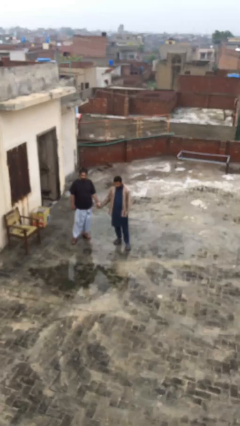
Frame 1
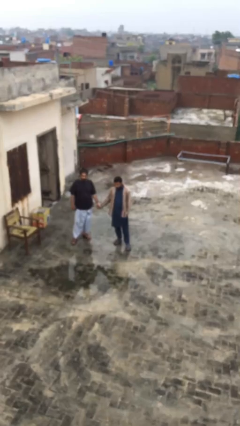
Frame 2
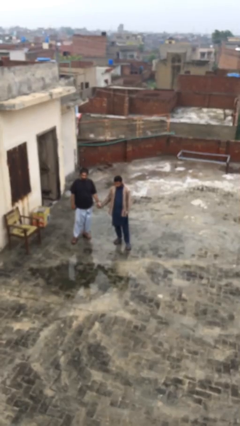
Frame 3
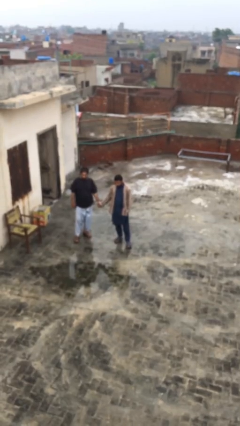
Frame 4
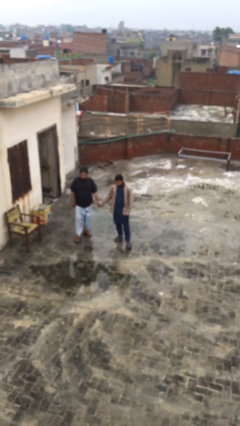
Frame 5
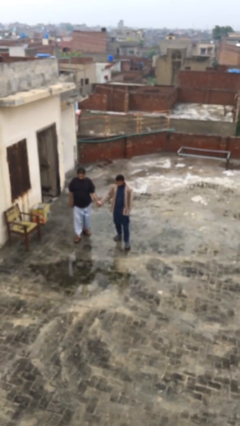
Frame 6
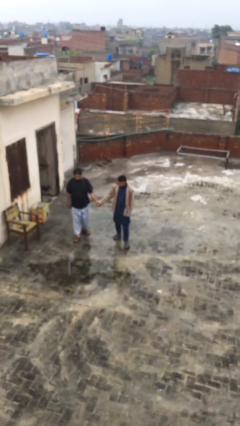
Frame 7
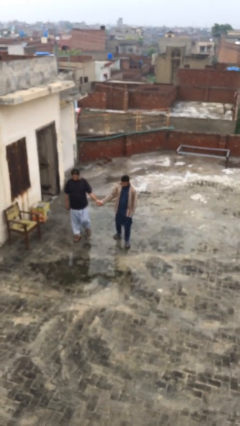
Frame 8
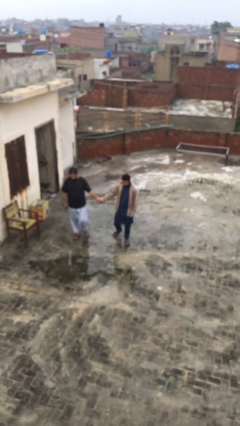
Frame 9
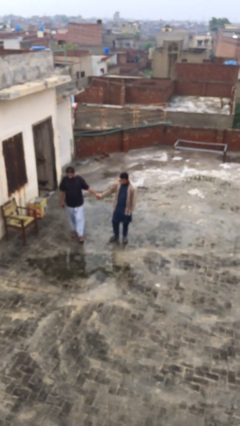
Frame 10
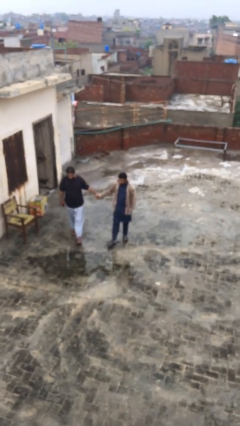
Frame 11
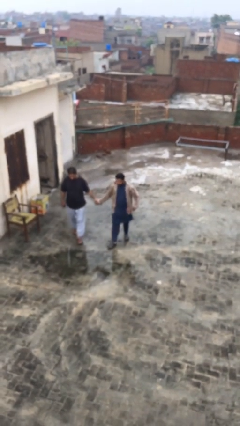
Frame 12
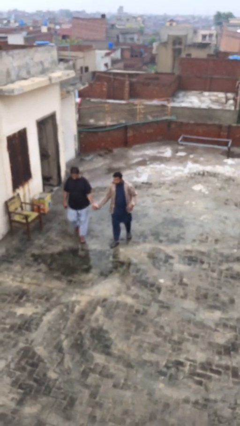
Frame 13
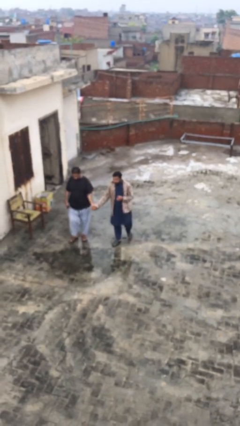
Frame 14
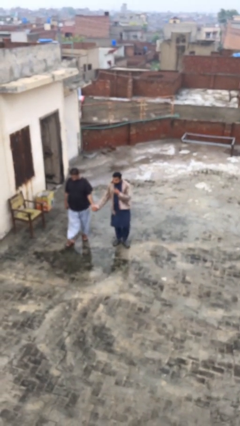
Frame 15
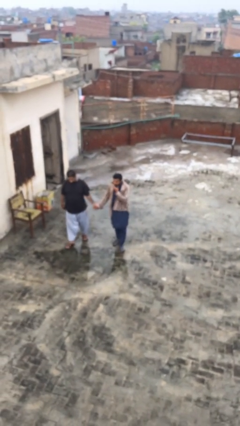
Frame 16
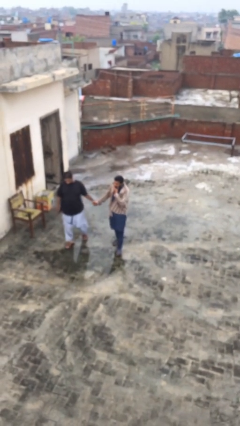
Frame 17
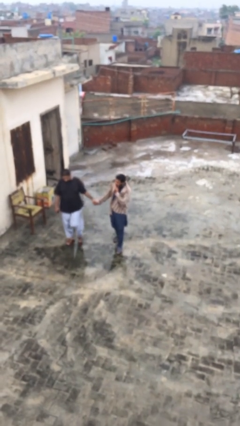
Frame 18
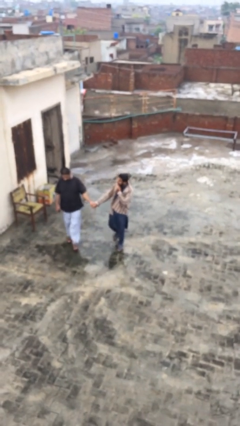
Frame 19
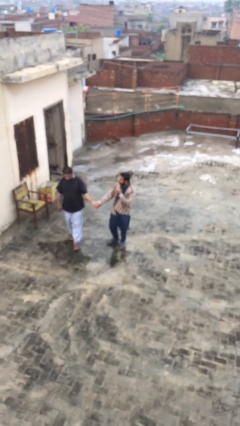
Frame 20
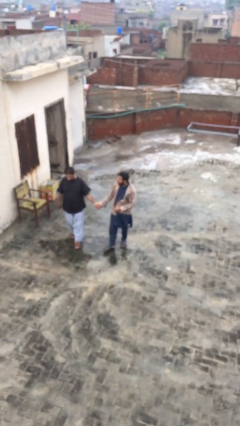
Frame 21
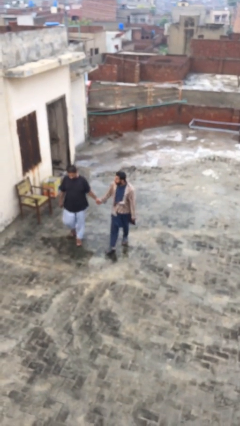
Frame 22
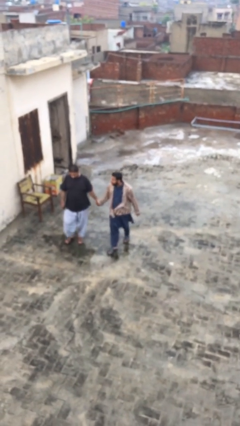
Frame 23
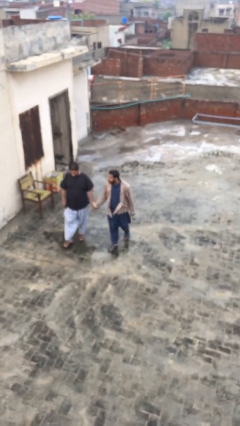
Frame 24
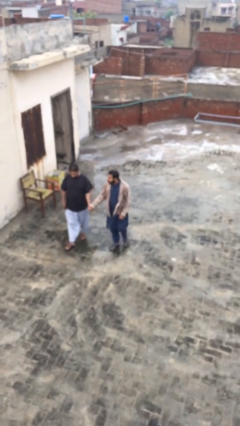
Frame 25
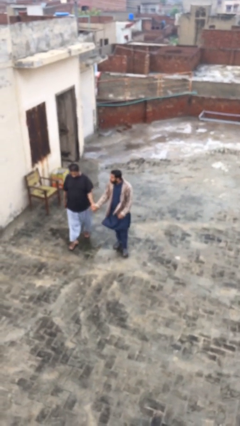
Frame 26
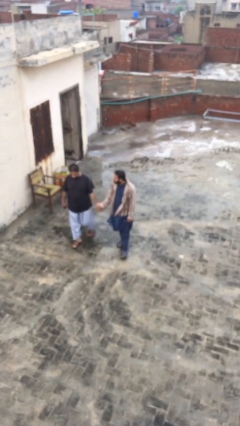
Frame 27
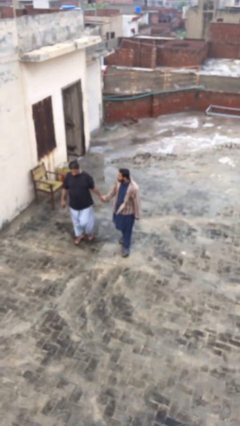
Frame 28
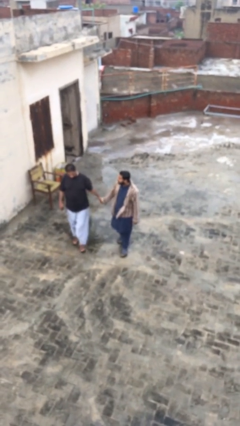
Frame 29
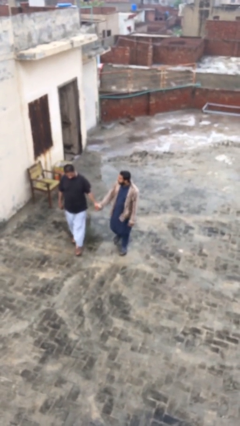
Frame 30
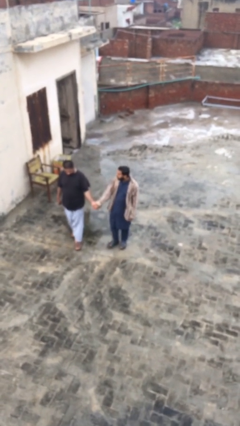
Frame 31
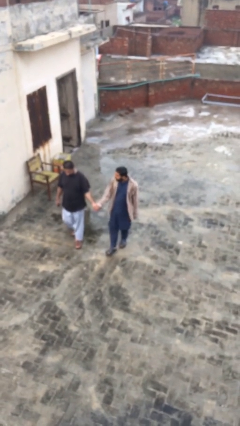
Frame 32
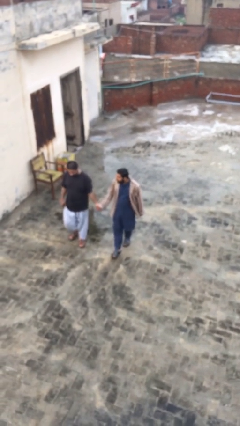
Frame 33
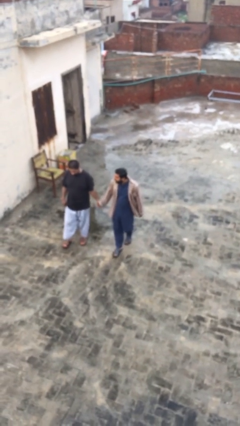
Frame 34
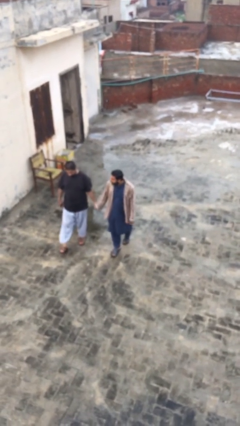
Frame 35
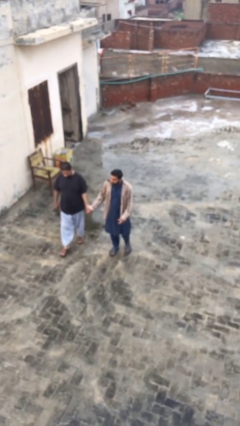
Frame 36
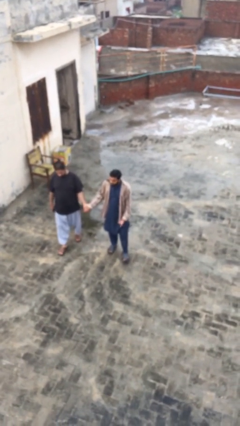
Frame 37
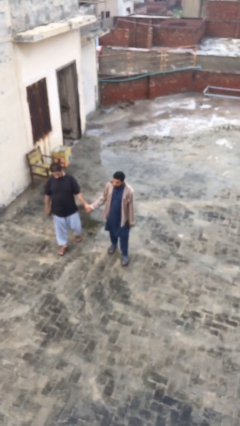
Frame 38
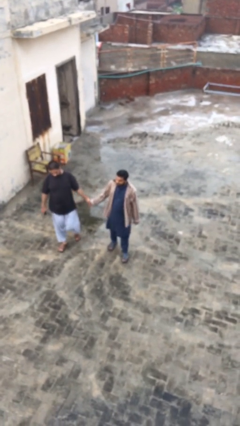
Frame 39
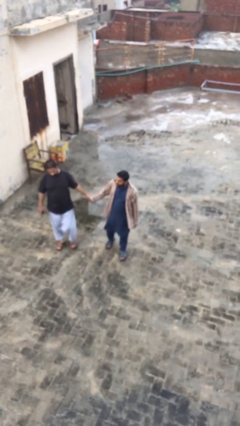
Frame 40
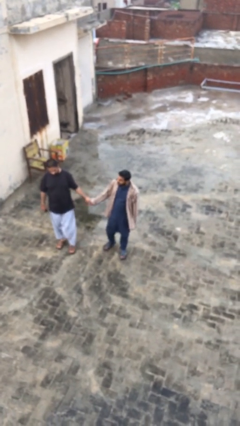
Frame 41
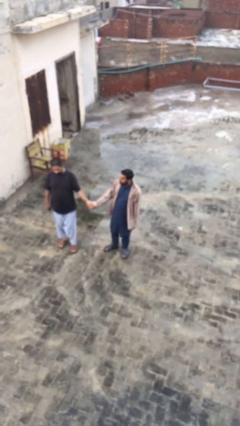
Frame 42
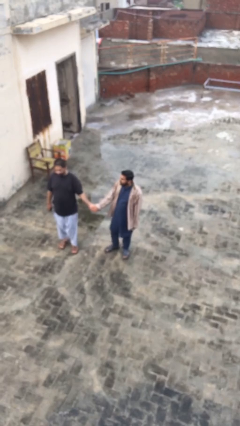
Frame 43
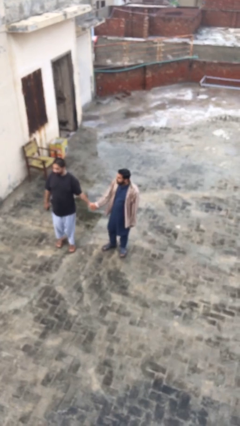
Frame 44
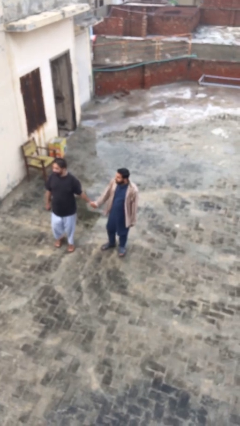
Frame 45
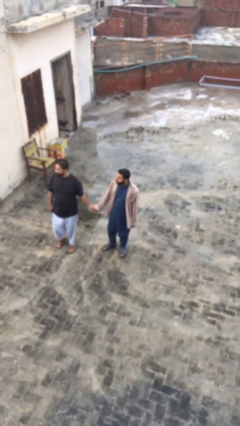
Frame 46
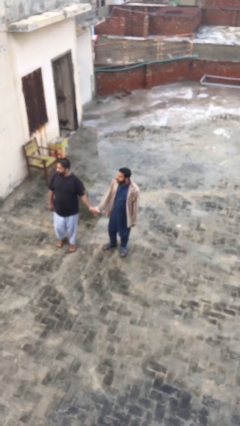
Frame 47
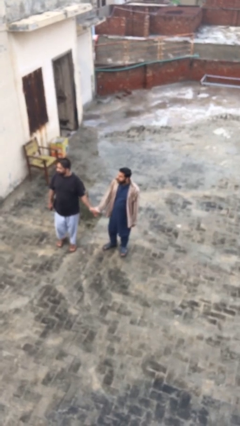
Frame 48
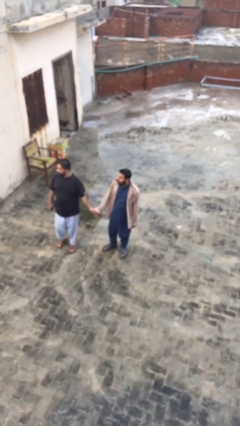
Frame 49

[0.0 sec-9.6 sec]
person holds hand

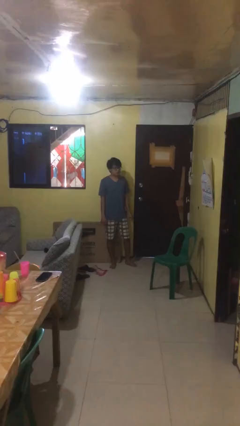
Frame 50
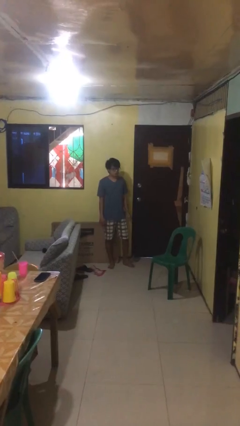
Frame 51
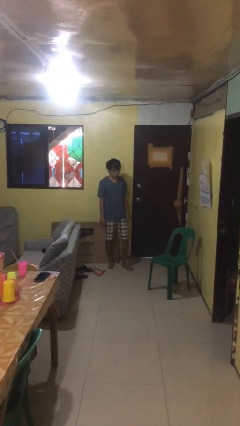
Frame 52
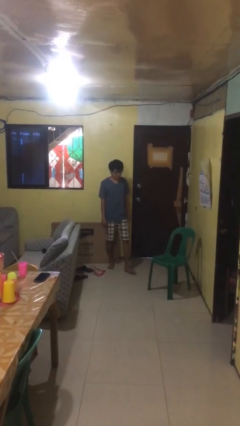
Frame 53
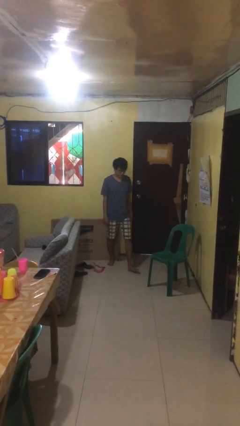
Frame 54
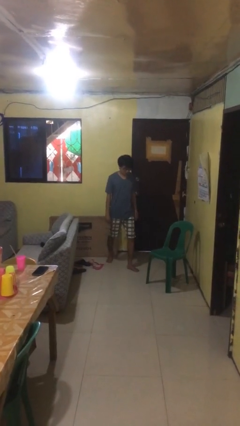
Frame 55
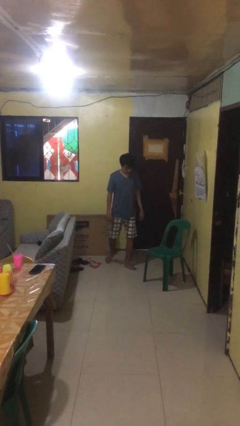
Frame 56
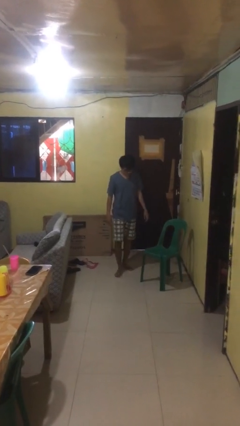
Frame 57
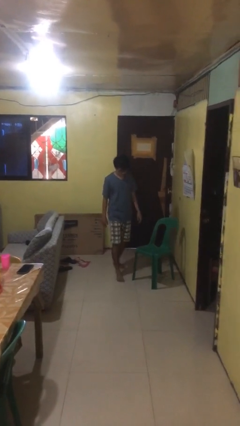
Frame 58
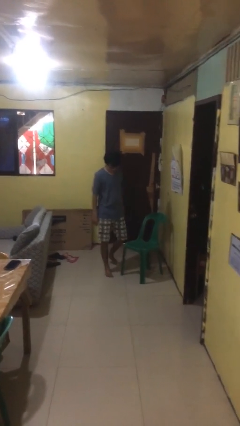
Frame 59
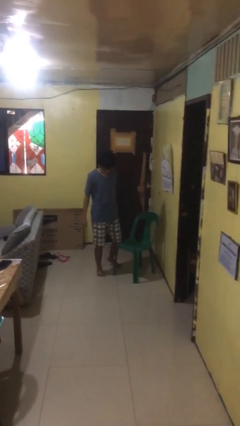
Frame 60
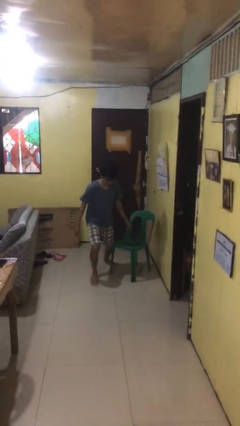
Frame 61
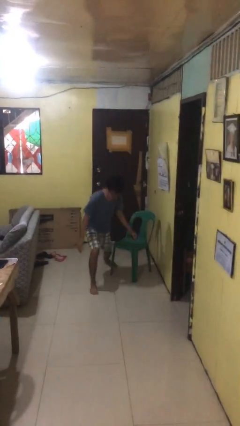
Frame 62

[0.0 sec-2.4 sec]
person trips on object on floor

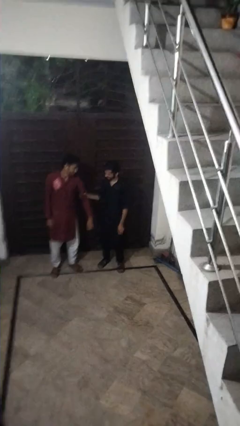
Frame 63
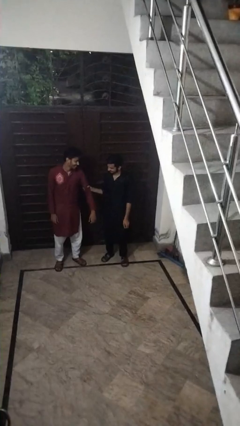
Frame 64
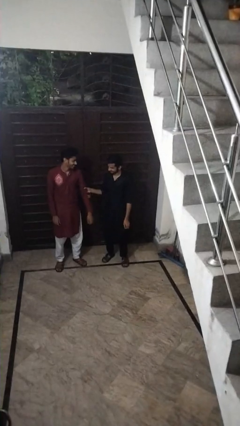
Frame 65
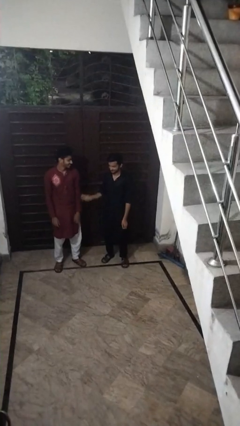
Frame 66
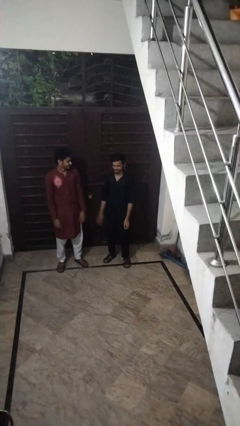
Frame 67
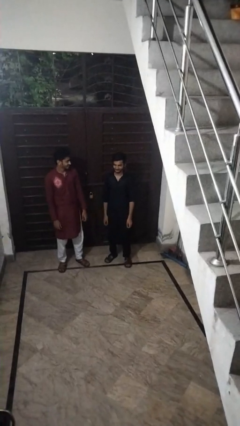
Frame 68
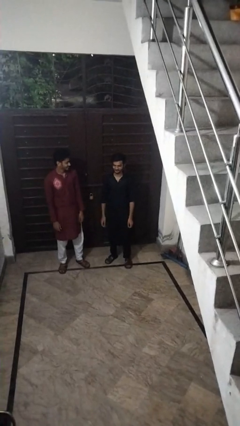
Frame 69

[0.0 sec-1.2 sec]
person grabs person by bicep

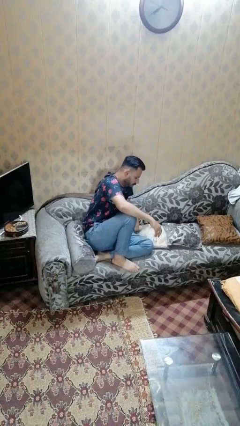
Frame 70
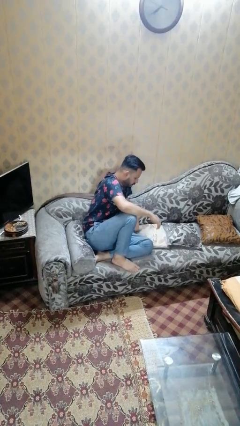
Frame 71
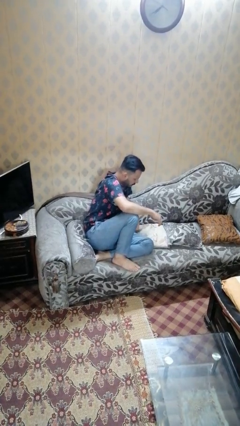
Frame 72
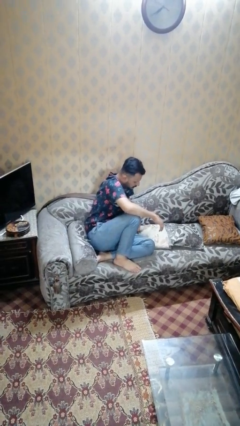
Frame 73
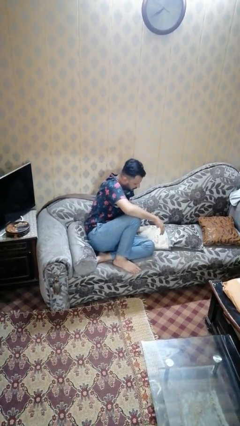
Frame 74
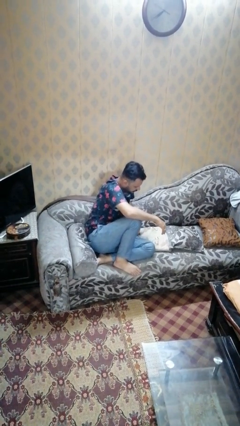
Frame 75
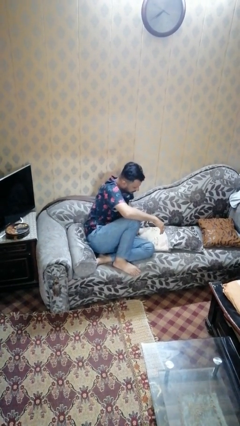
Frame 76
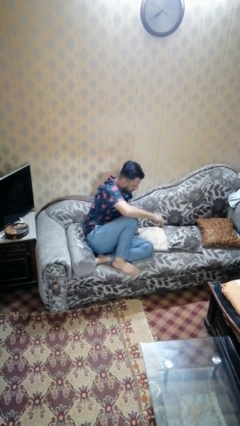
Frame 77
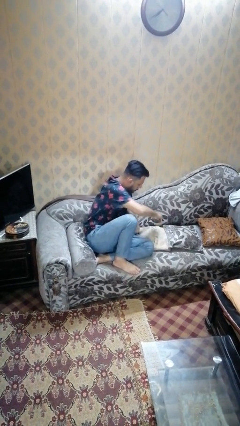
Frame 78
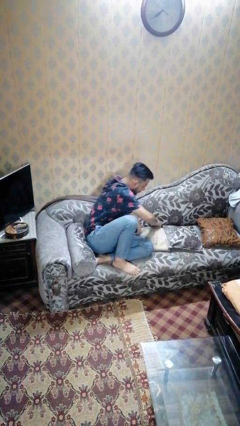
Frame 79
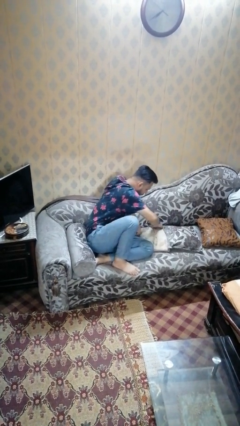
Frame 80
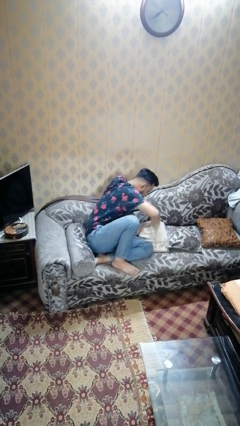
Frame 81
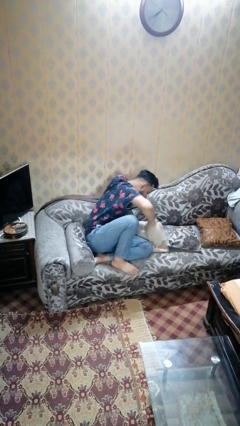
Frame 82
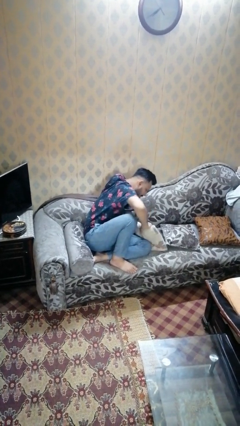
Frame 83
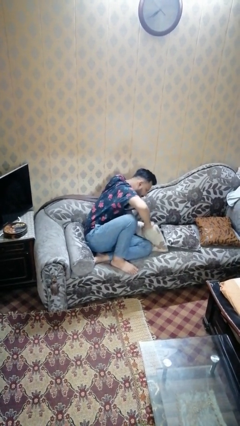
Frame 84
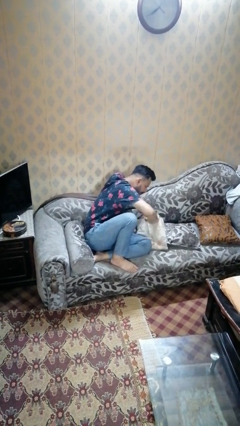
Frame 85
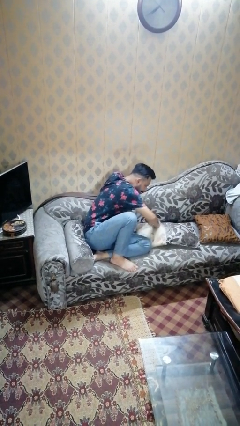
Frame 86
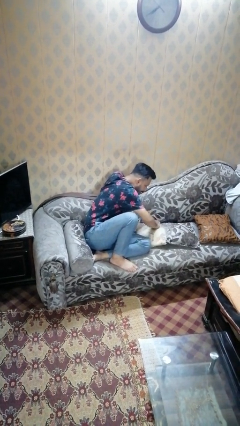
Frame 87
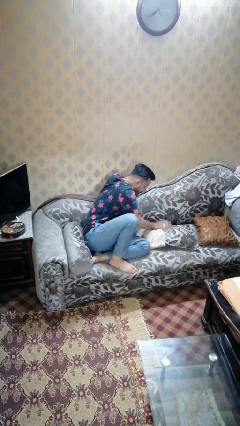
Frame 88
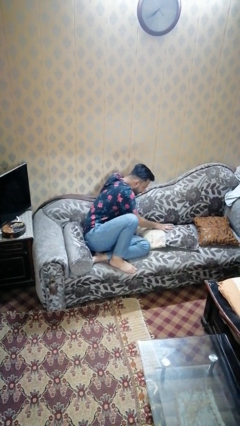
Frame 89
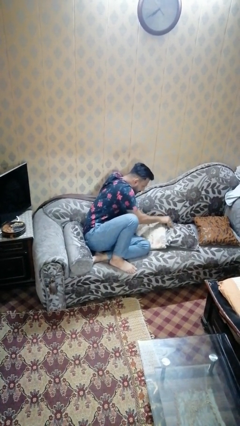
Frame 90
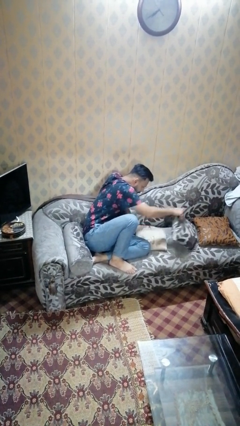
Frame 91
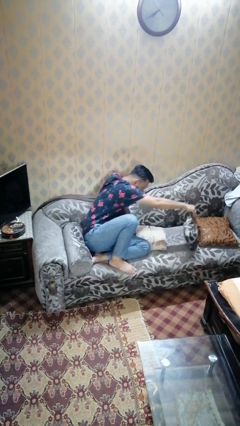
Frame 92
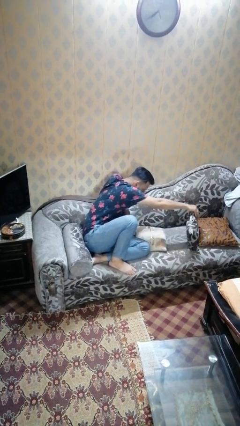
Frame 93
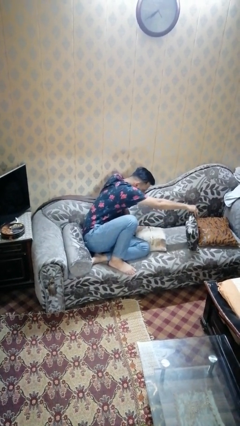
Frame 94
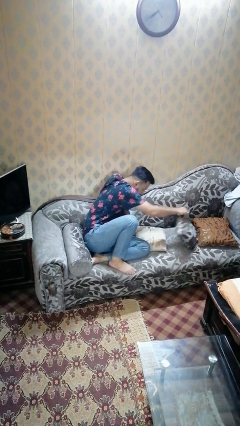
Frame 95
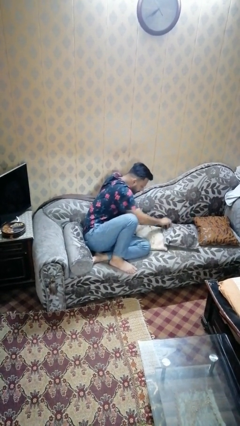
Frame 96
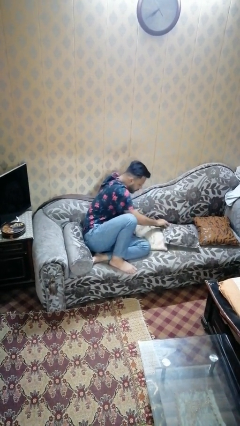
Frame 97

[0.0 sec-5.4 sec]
person searches in couch
